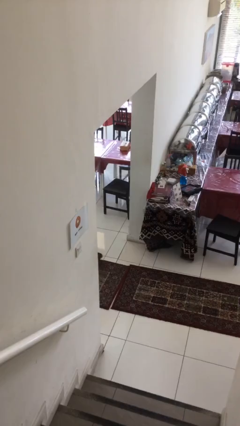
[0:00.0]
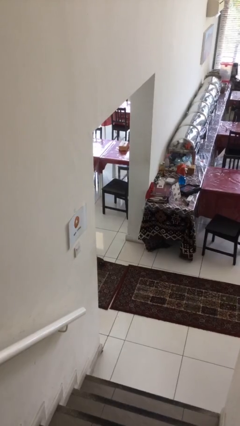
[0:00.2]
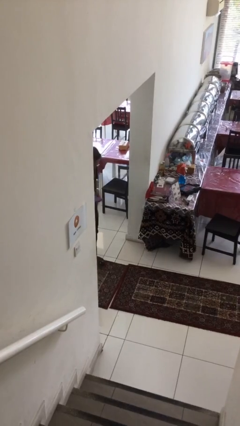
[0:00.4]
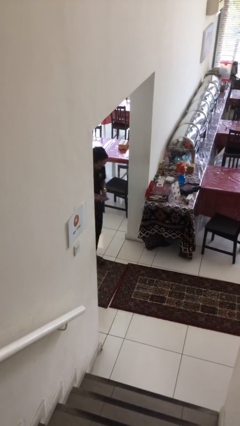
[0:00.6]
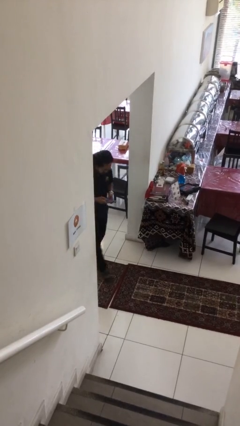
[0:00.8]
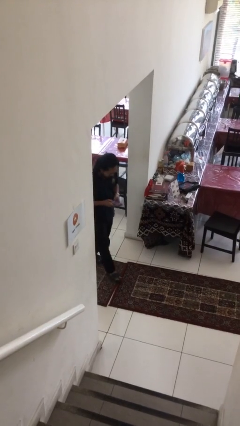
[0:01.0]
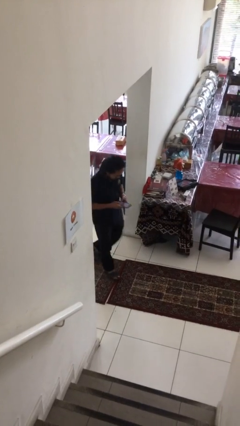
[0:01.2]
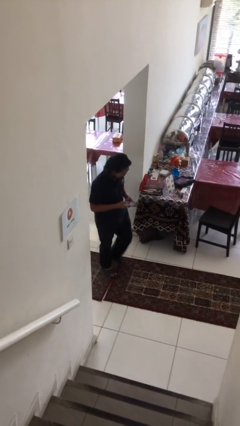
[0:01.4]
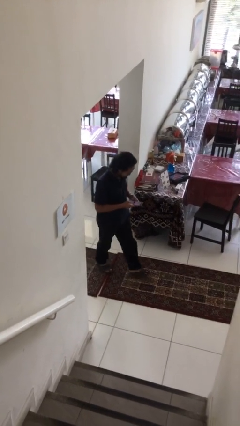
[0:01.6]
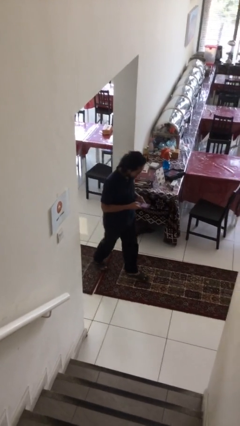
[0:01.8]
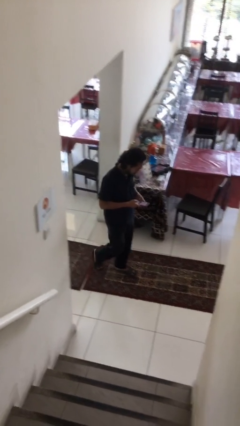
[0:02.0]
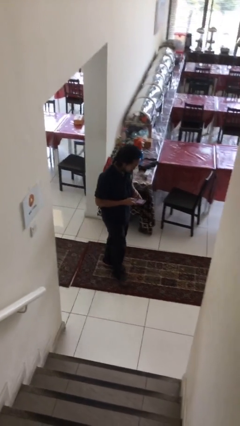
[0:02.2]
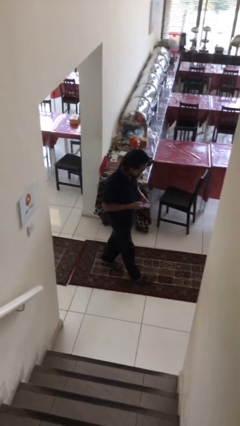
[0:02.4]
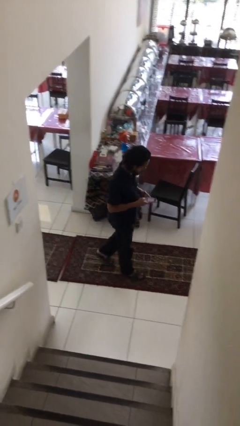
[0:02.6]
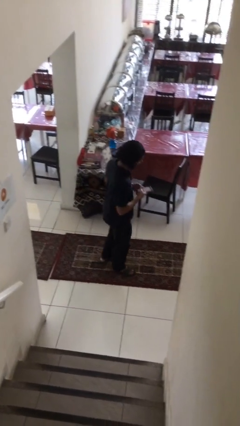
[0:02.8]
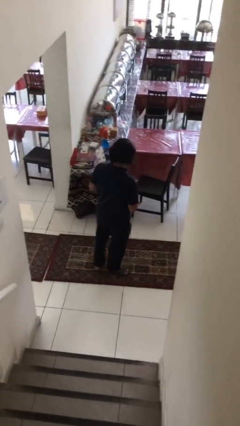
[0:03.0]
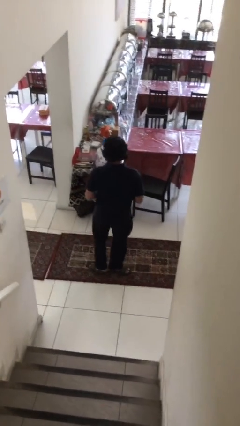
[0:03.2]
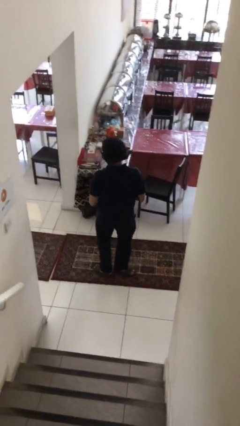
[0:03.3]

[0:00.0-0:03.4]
person enters scene through structure

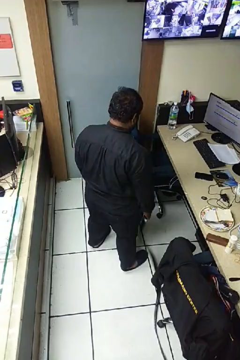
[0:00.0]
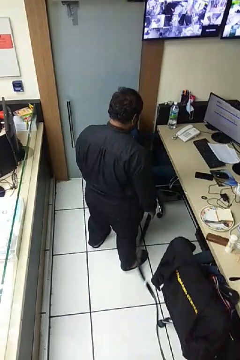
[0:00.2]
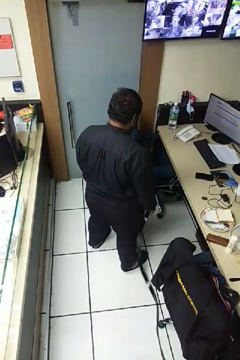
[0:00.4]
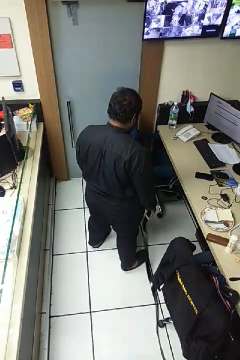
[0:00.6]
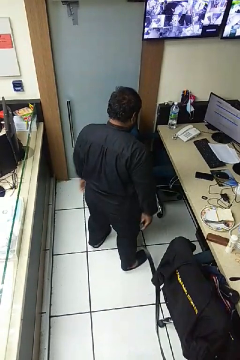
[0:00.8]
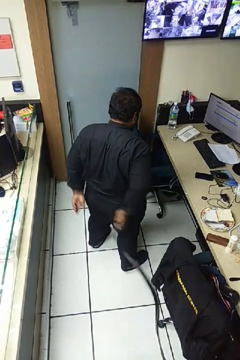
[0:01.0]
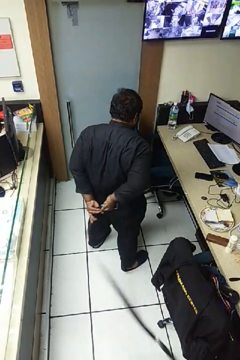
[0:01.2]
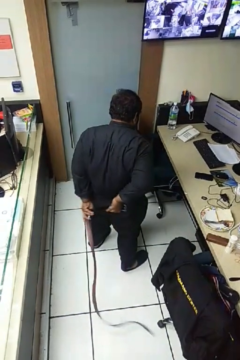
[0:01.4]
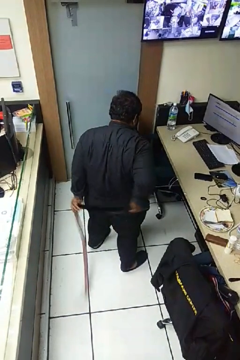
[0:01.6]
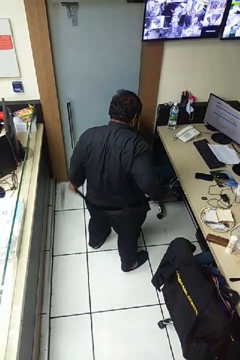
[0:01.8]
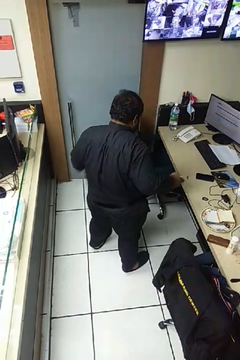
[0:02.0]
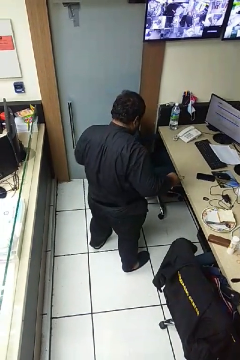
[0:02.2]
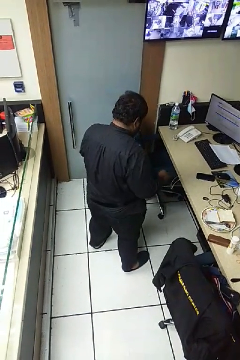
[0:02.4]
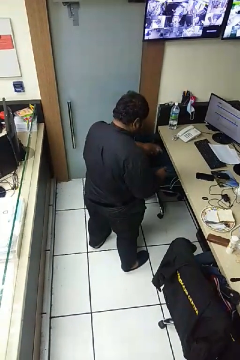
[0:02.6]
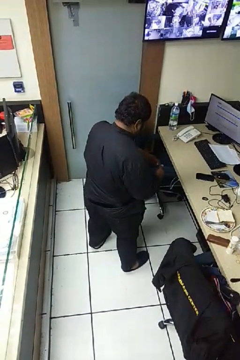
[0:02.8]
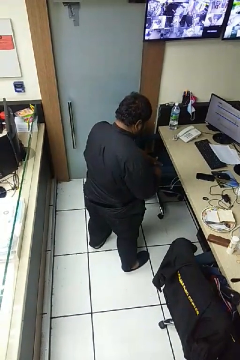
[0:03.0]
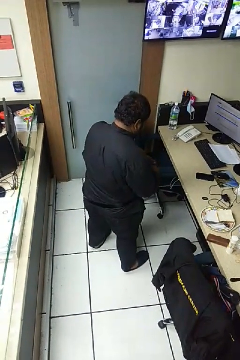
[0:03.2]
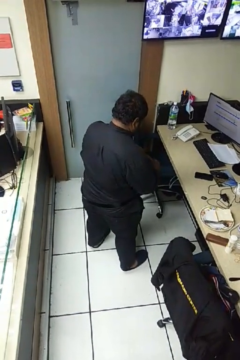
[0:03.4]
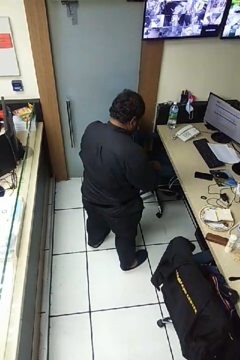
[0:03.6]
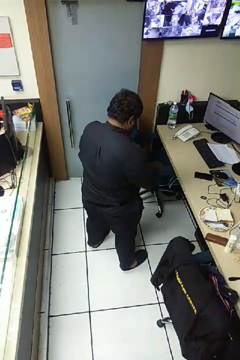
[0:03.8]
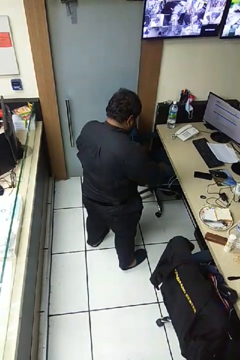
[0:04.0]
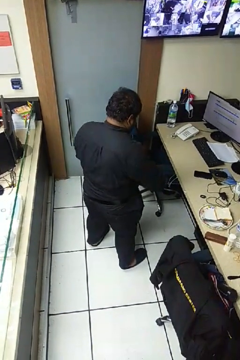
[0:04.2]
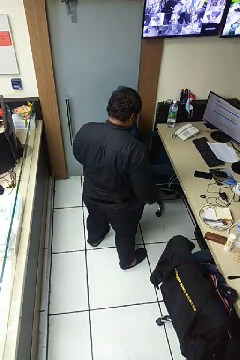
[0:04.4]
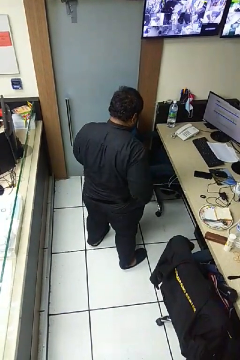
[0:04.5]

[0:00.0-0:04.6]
person puts on belt

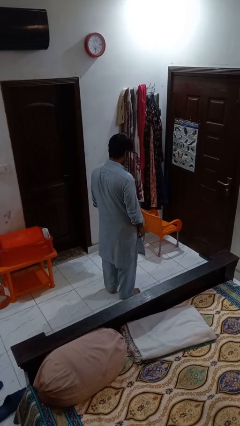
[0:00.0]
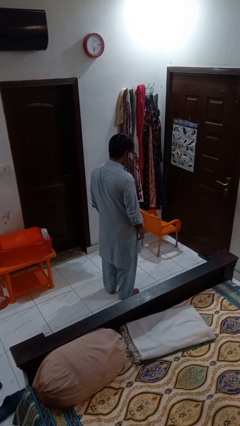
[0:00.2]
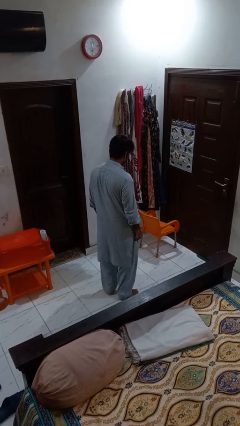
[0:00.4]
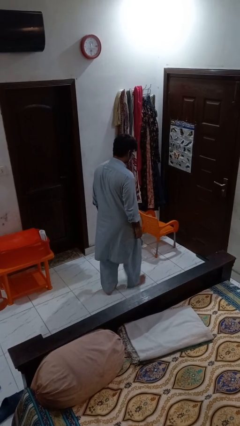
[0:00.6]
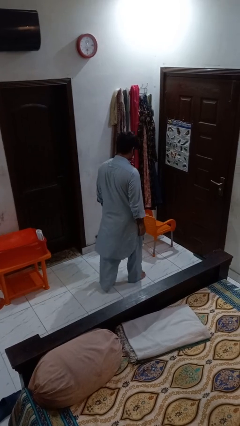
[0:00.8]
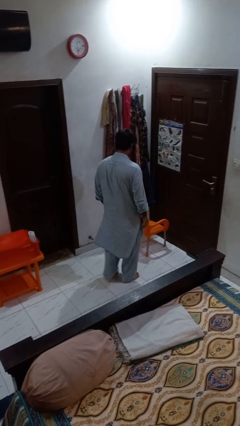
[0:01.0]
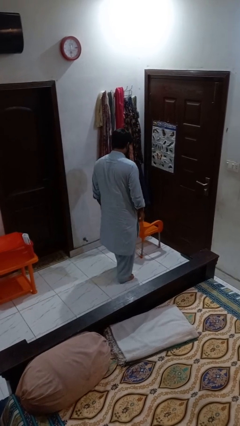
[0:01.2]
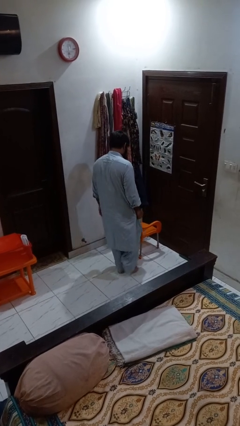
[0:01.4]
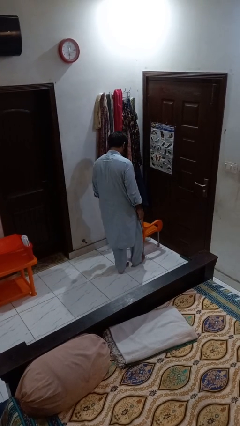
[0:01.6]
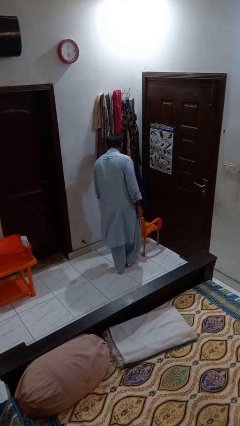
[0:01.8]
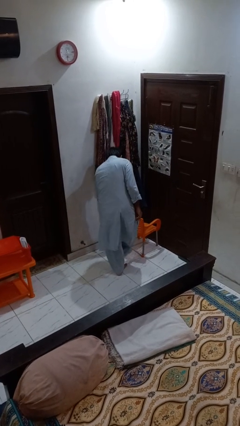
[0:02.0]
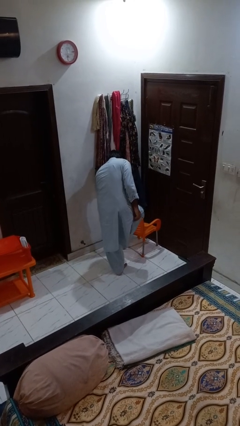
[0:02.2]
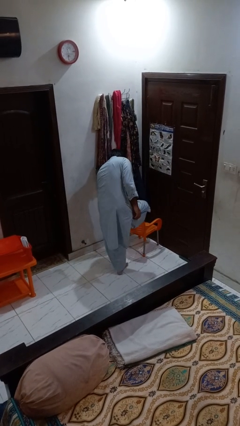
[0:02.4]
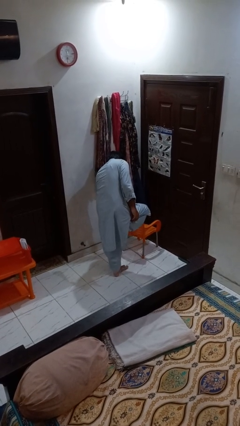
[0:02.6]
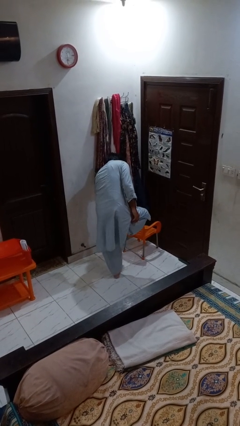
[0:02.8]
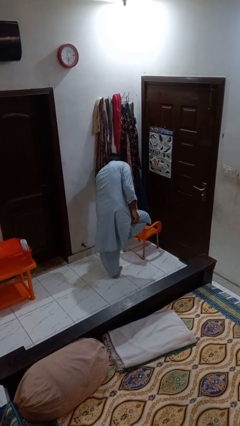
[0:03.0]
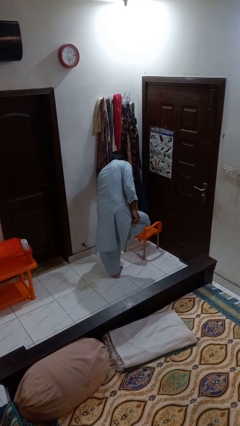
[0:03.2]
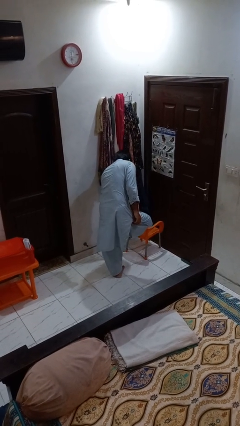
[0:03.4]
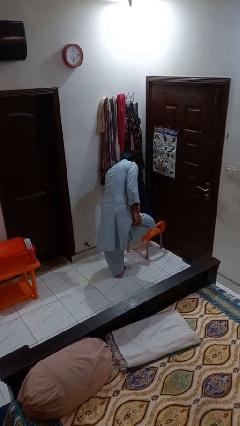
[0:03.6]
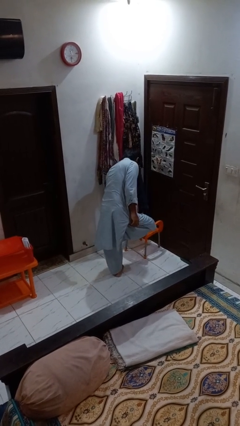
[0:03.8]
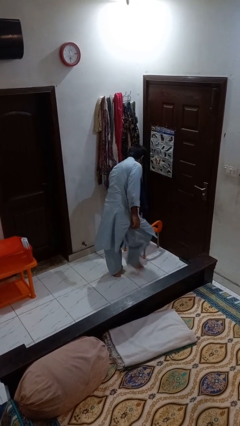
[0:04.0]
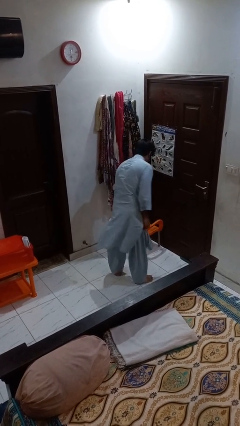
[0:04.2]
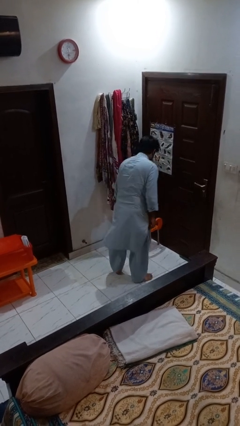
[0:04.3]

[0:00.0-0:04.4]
person stubs toe

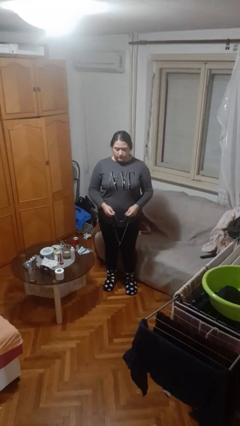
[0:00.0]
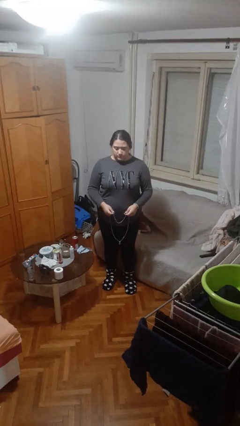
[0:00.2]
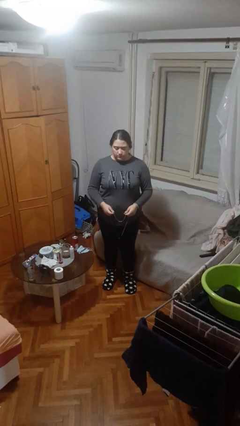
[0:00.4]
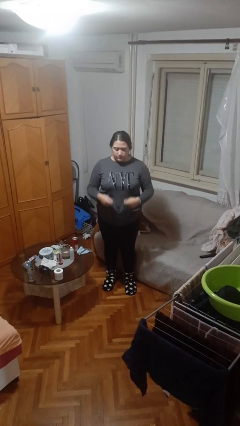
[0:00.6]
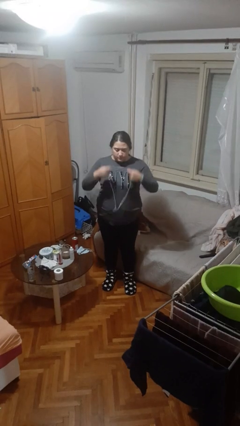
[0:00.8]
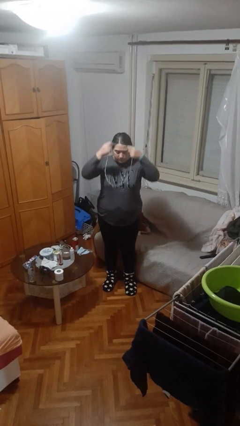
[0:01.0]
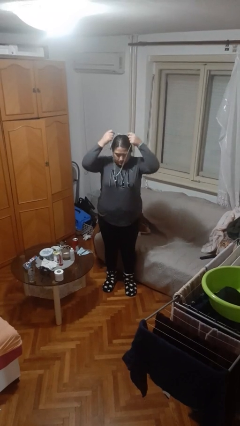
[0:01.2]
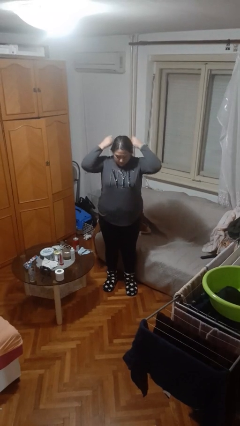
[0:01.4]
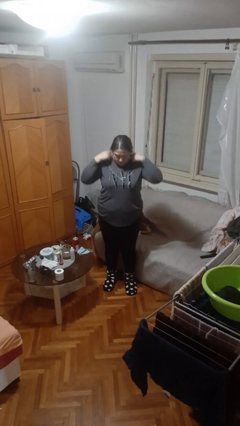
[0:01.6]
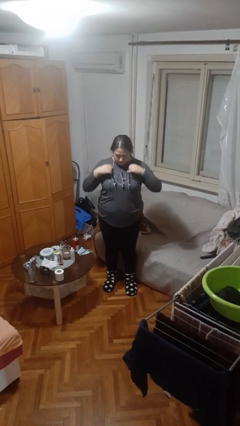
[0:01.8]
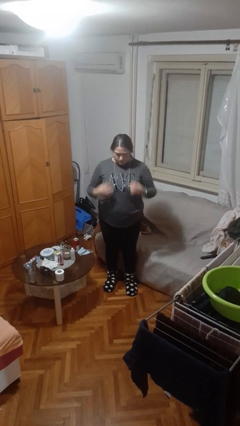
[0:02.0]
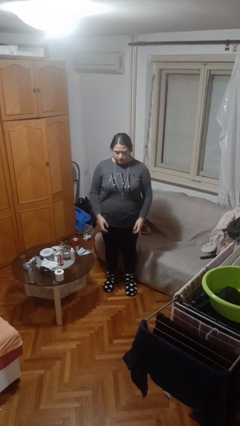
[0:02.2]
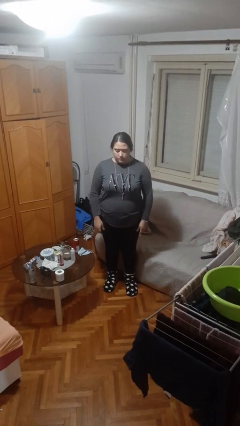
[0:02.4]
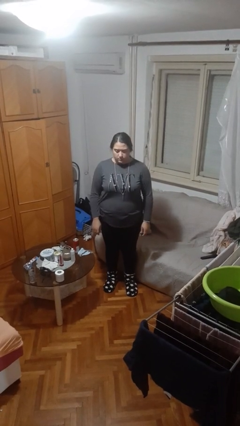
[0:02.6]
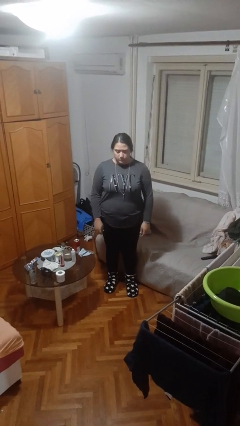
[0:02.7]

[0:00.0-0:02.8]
person puts on necklace

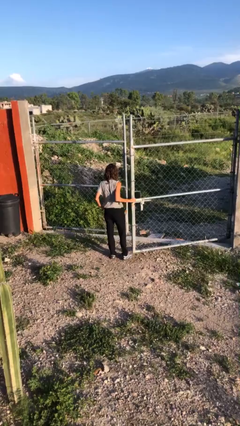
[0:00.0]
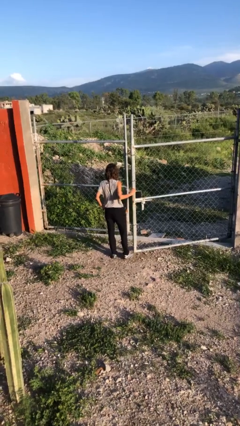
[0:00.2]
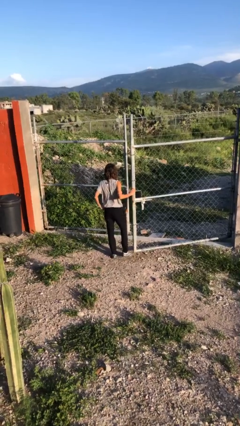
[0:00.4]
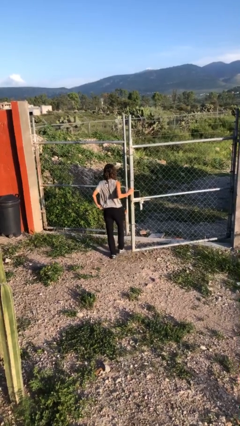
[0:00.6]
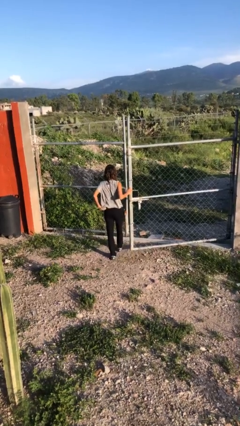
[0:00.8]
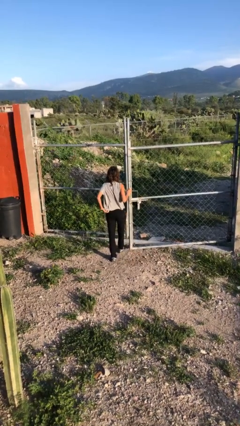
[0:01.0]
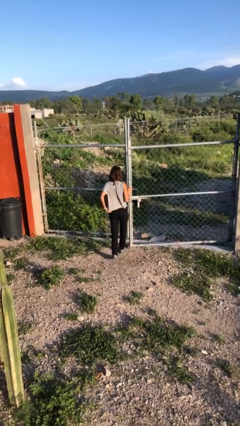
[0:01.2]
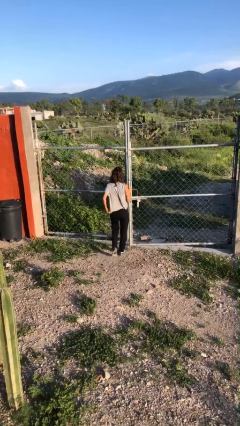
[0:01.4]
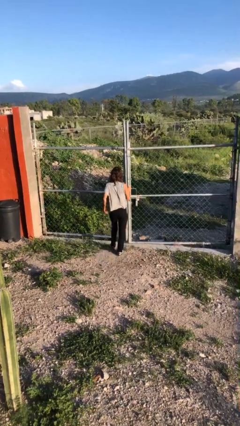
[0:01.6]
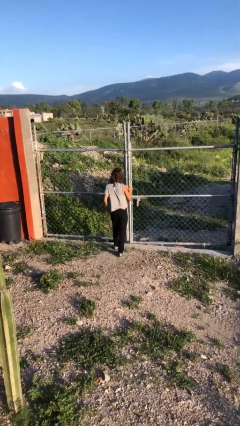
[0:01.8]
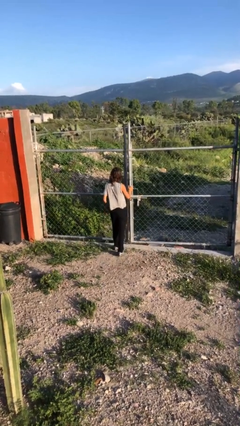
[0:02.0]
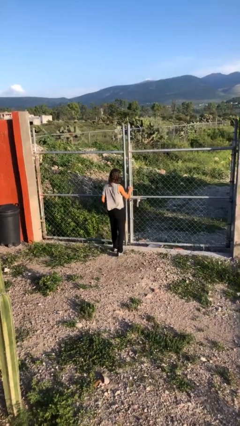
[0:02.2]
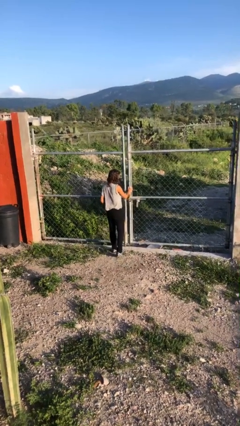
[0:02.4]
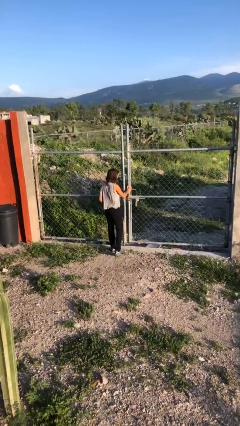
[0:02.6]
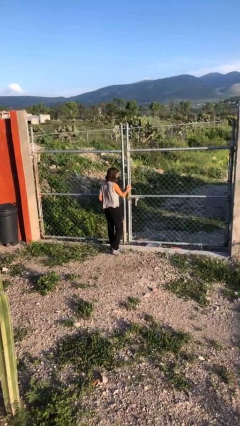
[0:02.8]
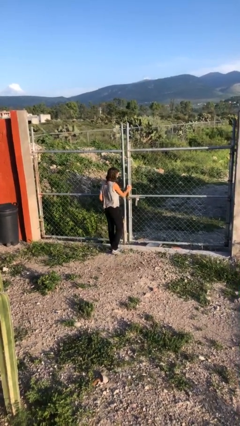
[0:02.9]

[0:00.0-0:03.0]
person closes gate
